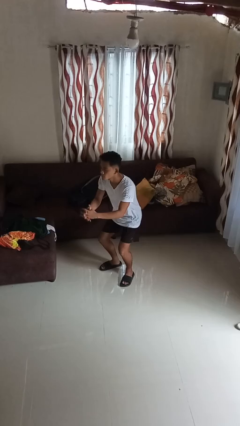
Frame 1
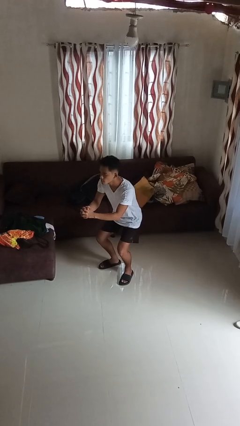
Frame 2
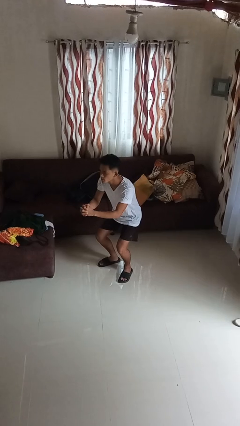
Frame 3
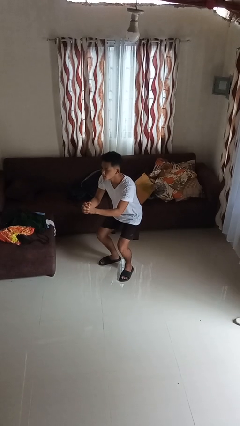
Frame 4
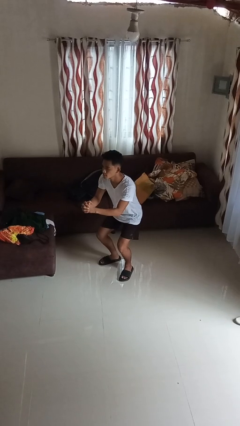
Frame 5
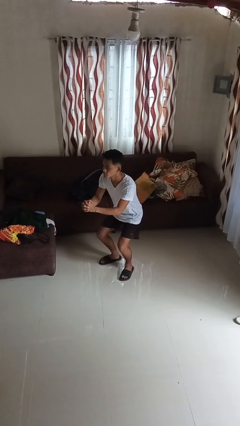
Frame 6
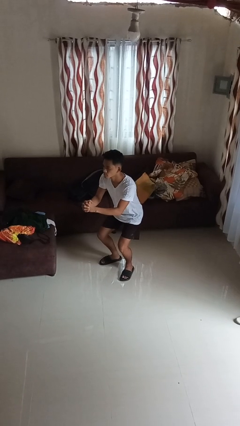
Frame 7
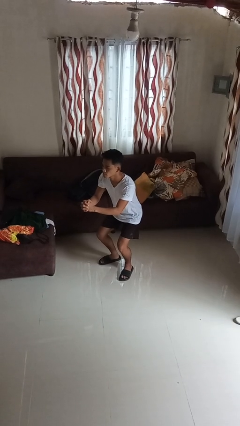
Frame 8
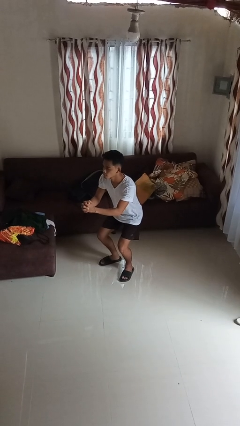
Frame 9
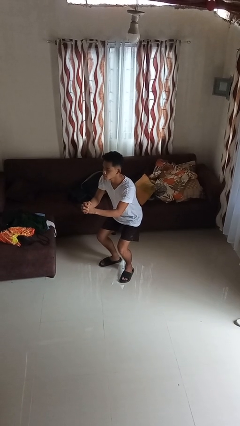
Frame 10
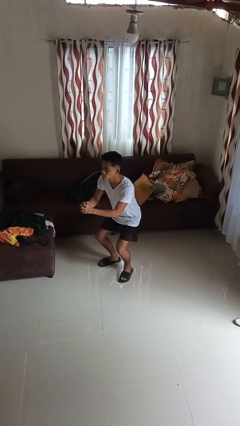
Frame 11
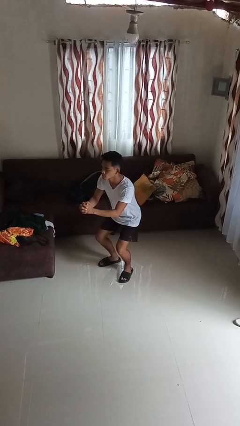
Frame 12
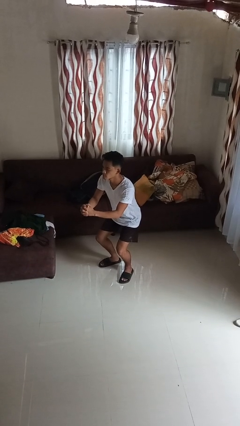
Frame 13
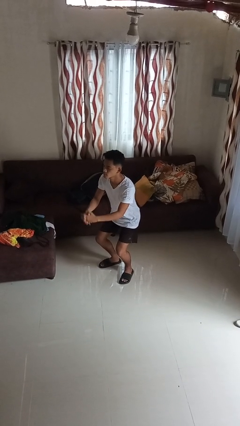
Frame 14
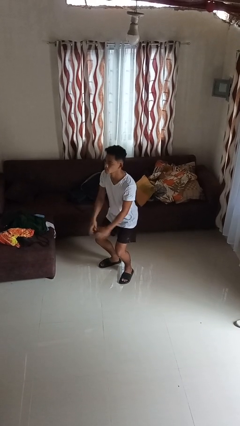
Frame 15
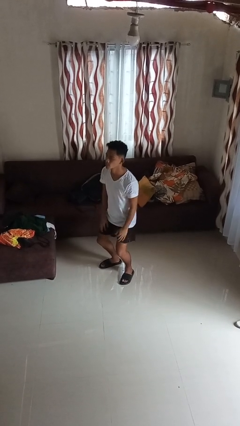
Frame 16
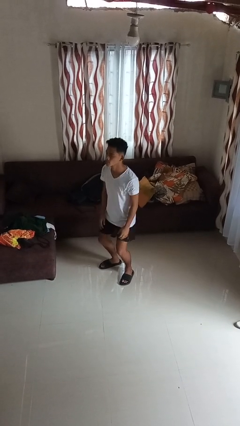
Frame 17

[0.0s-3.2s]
person squats

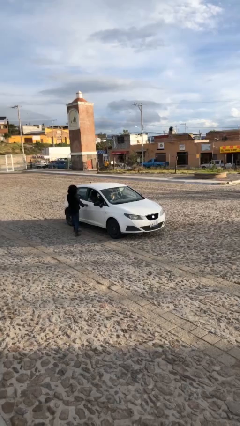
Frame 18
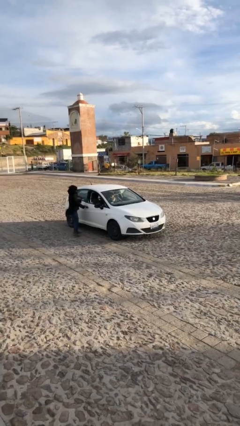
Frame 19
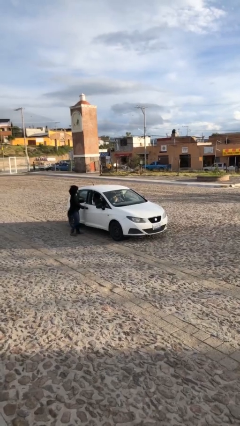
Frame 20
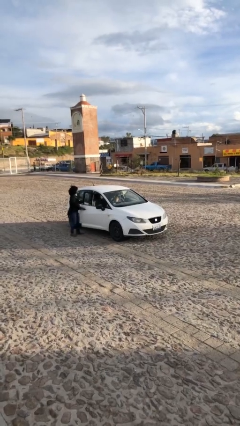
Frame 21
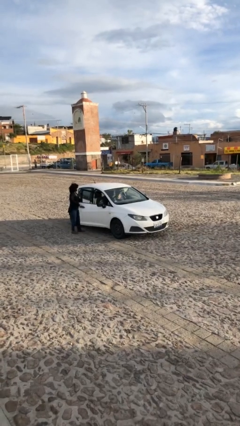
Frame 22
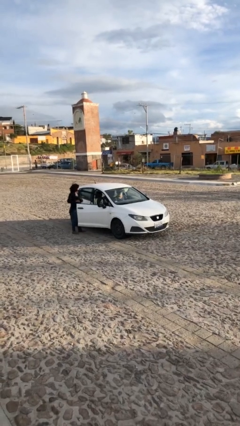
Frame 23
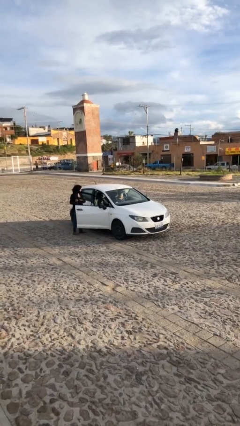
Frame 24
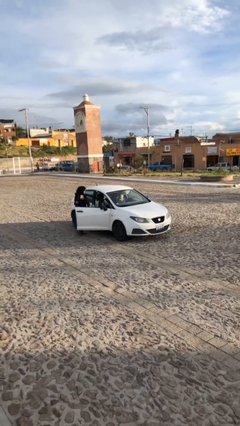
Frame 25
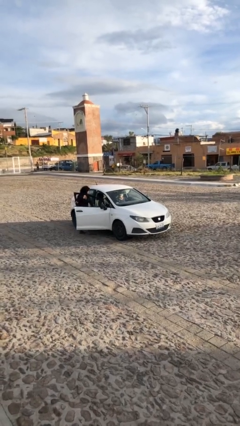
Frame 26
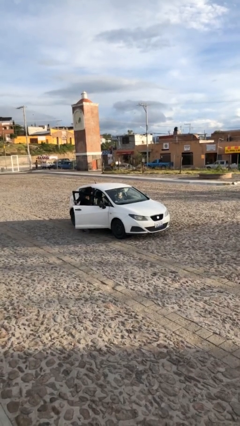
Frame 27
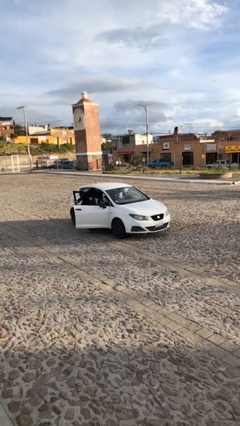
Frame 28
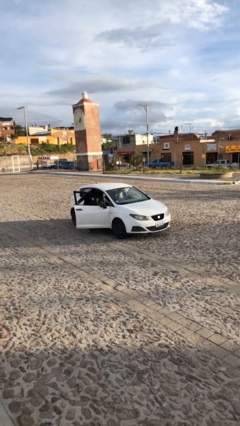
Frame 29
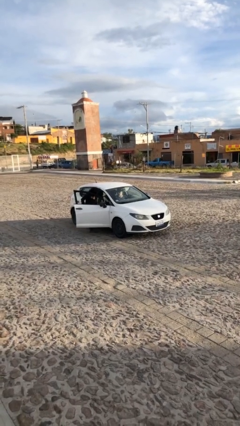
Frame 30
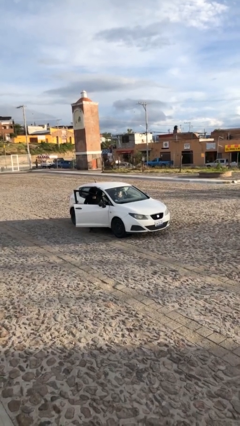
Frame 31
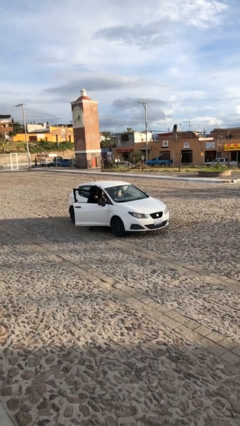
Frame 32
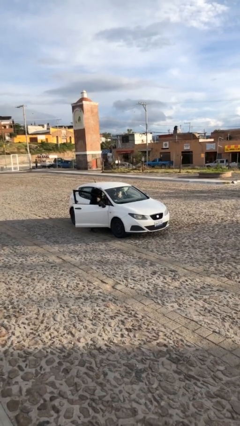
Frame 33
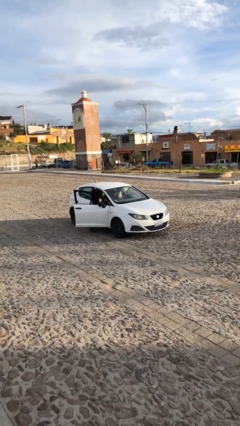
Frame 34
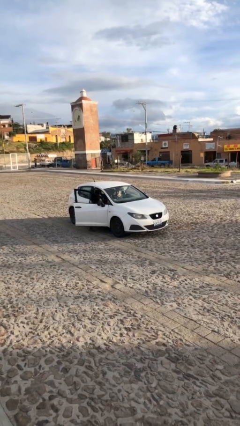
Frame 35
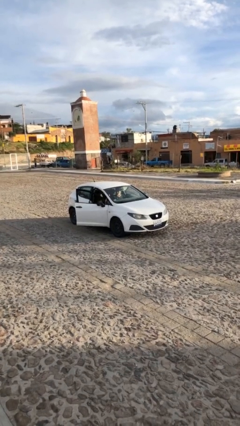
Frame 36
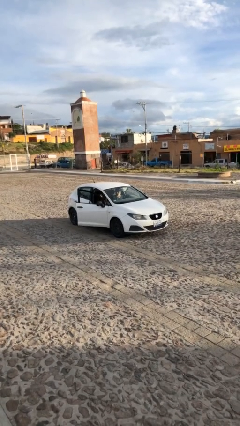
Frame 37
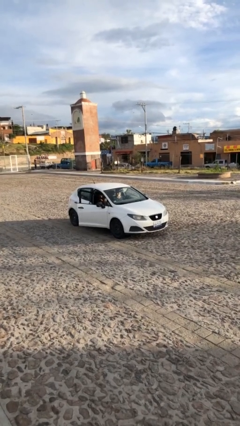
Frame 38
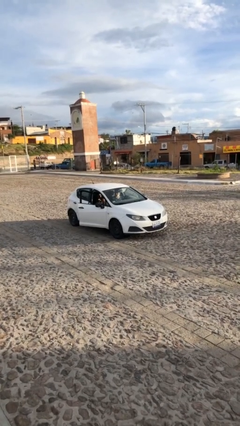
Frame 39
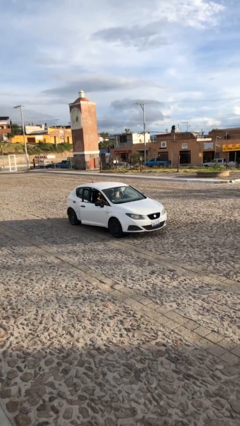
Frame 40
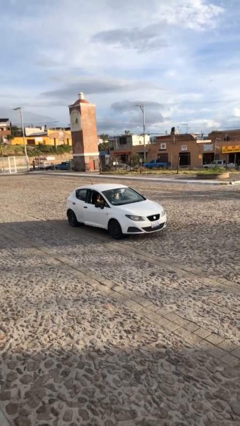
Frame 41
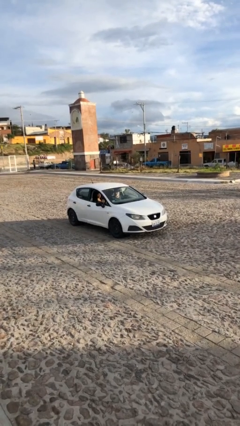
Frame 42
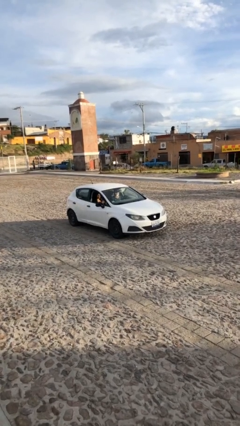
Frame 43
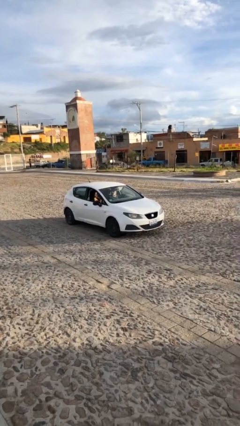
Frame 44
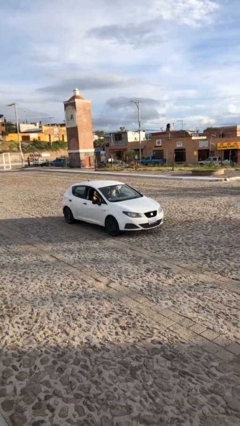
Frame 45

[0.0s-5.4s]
car picks up person

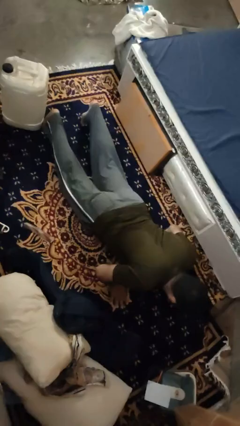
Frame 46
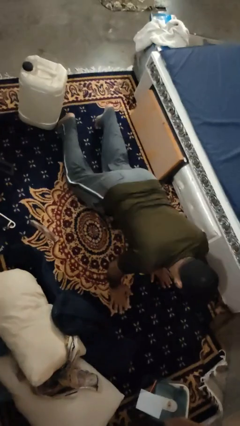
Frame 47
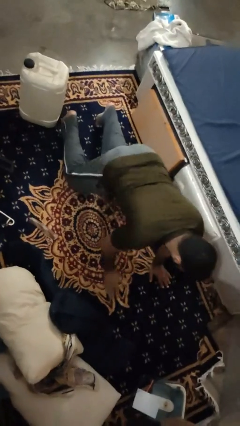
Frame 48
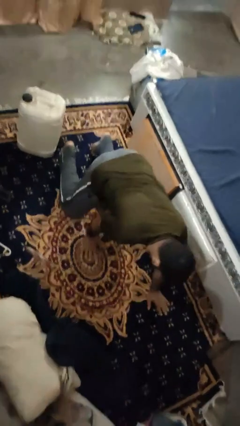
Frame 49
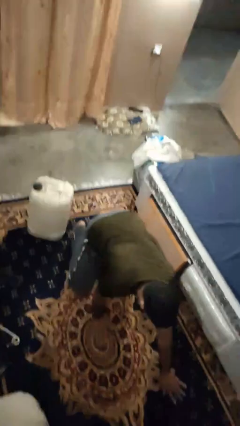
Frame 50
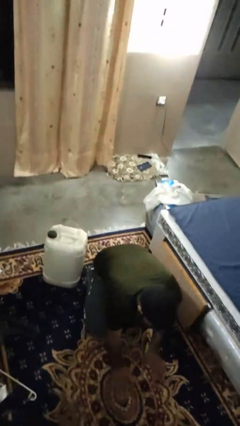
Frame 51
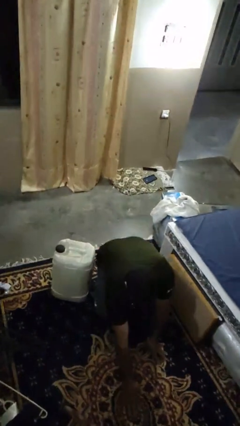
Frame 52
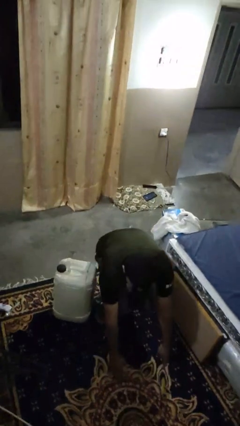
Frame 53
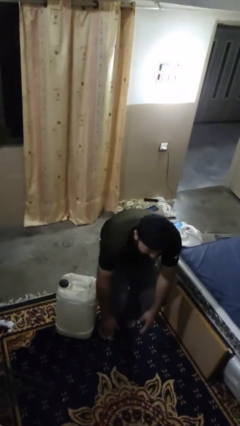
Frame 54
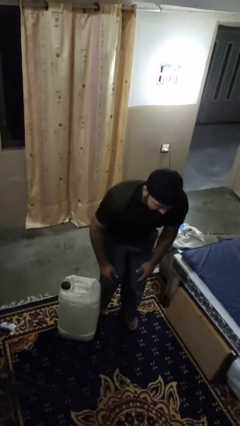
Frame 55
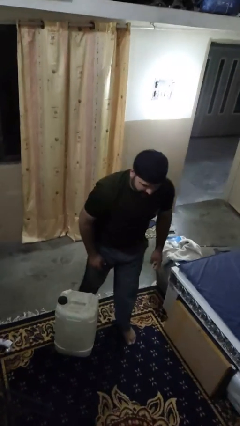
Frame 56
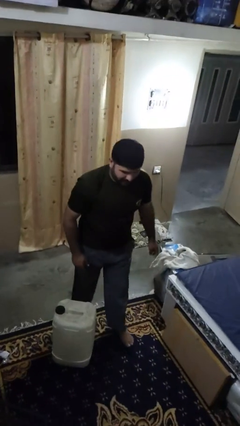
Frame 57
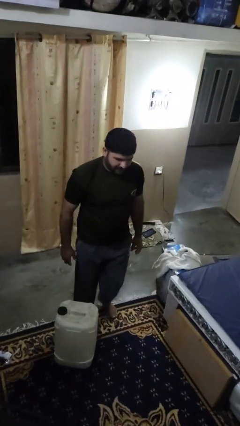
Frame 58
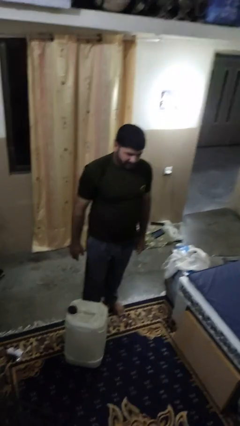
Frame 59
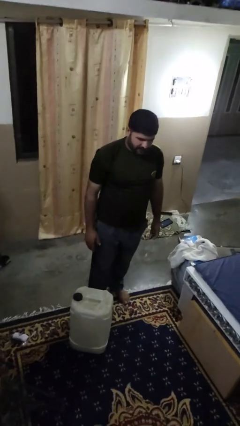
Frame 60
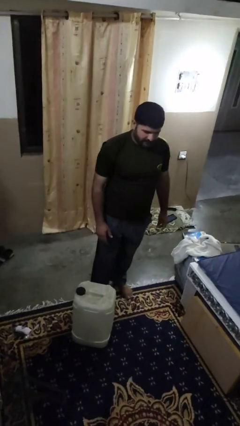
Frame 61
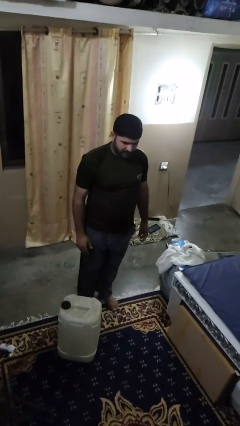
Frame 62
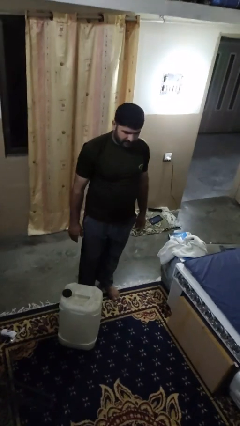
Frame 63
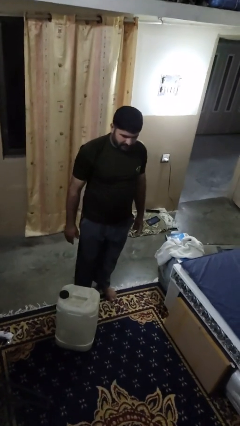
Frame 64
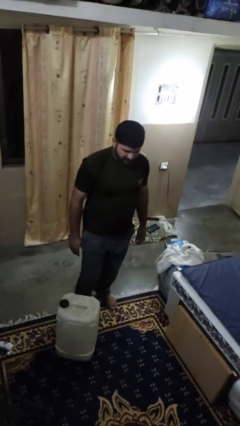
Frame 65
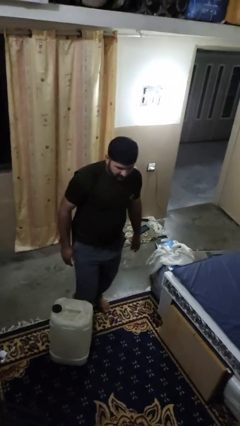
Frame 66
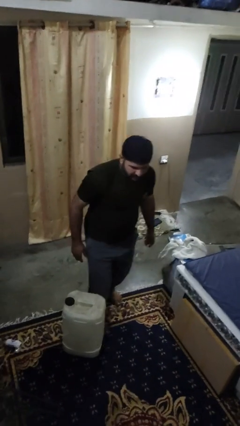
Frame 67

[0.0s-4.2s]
person stands up from floor

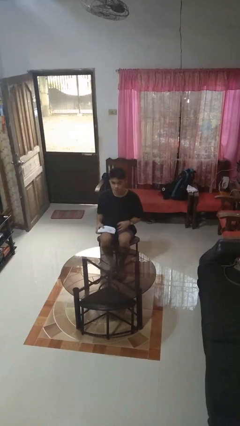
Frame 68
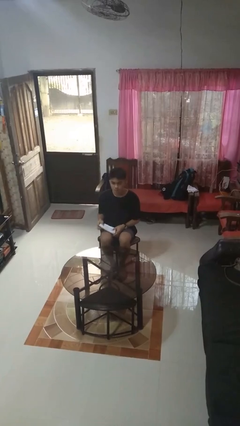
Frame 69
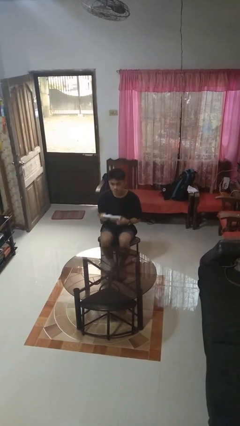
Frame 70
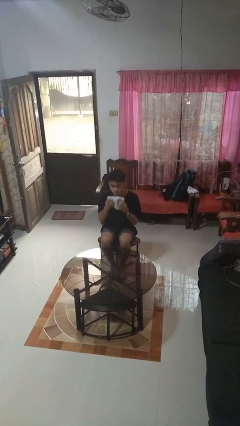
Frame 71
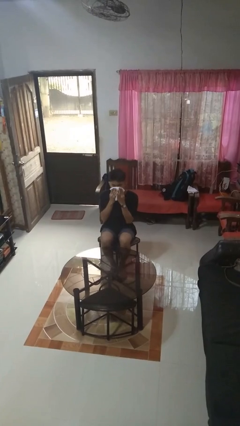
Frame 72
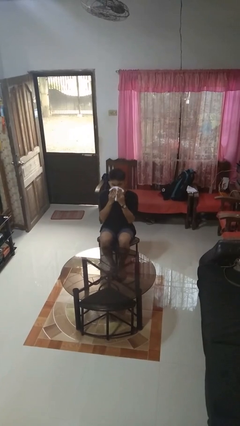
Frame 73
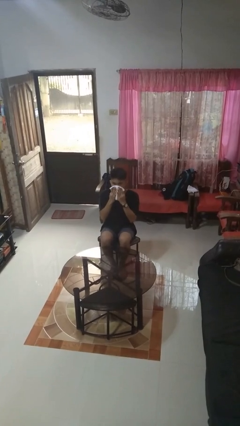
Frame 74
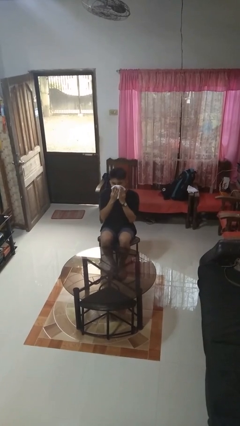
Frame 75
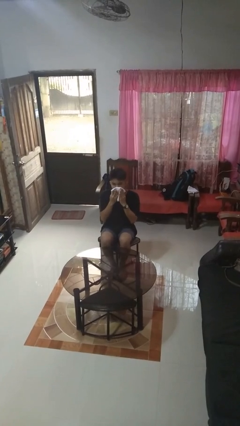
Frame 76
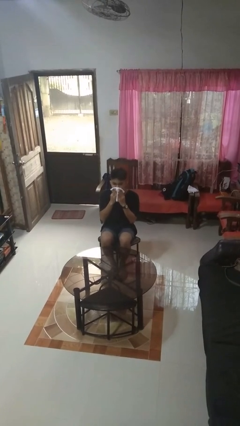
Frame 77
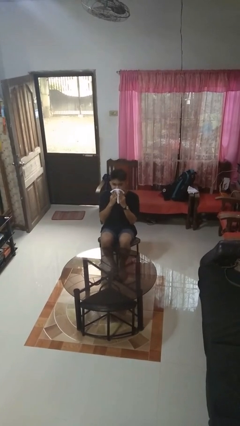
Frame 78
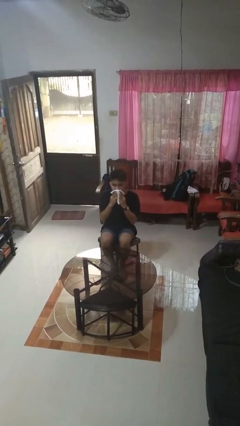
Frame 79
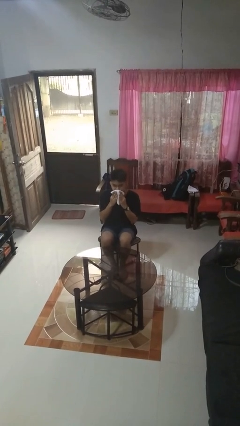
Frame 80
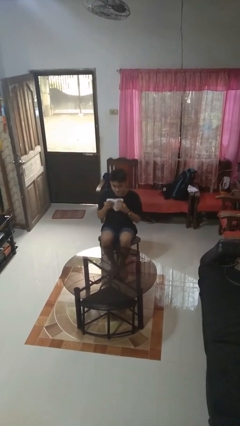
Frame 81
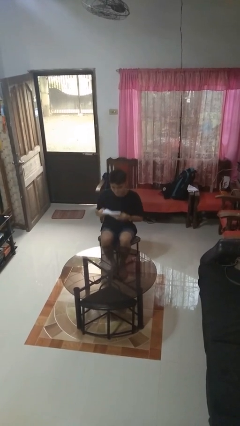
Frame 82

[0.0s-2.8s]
person wipes mouth with napkin

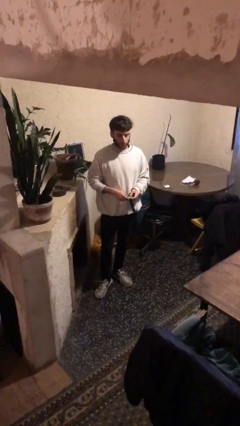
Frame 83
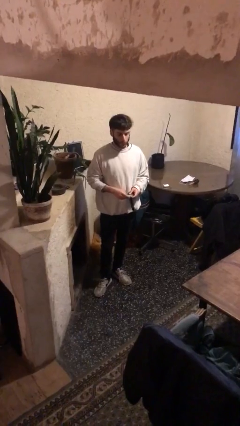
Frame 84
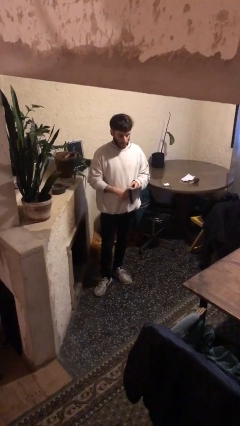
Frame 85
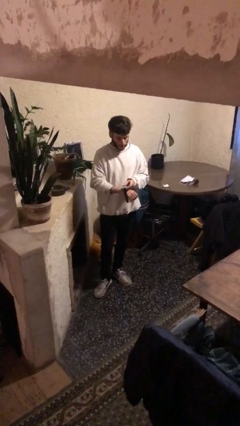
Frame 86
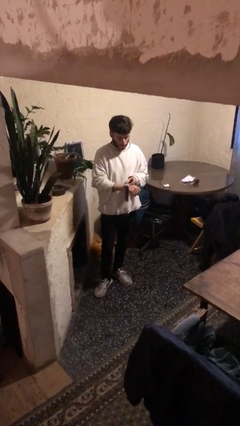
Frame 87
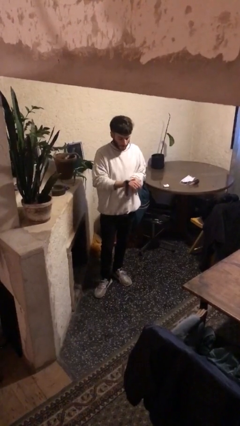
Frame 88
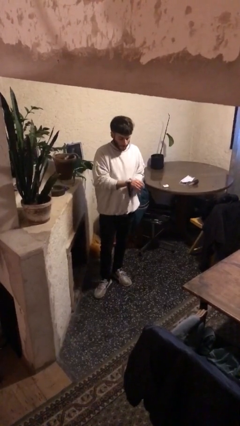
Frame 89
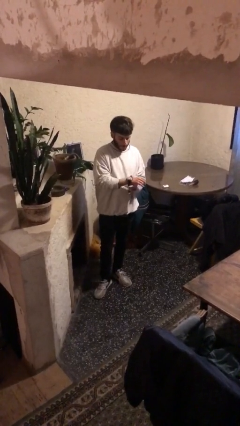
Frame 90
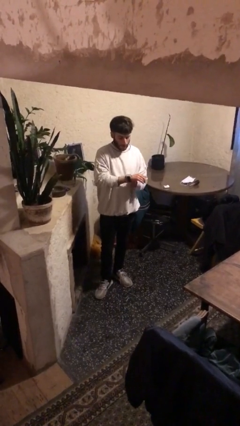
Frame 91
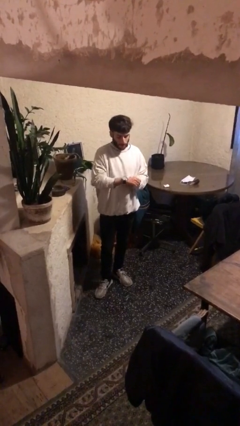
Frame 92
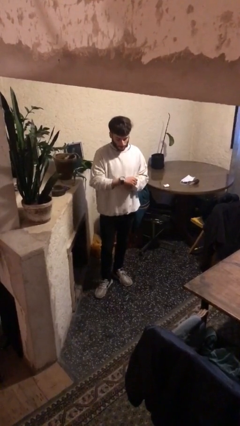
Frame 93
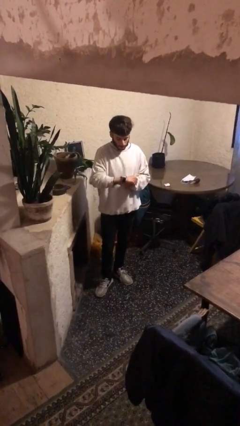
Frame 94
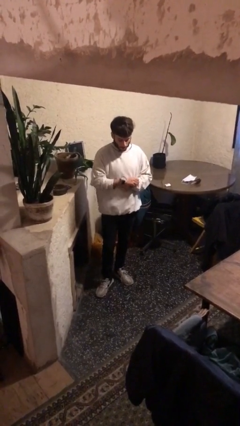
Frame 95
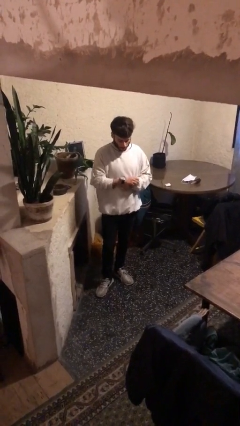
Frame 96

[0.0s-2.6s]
person puts on wristwatch
